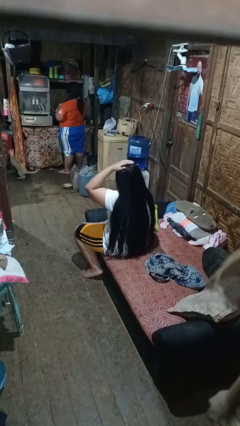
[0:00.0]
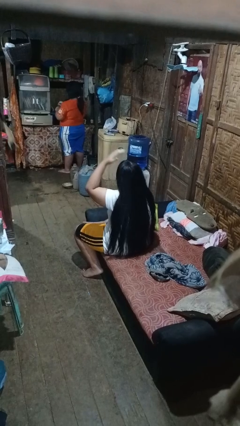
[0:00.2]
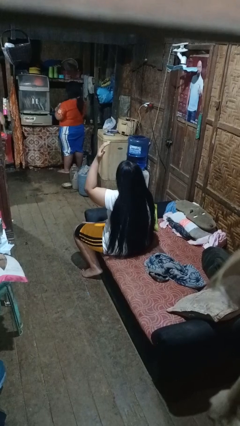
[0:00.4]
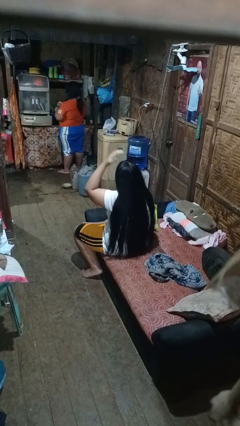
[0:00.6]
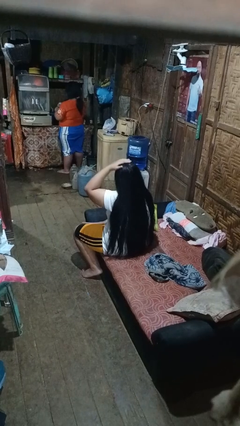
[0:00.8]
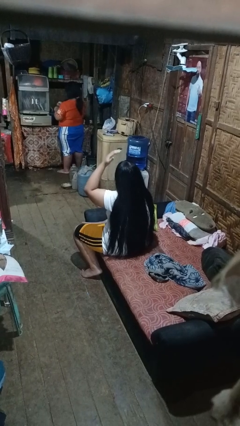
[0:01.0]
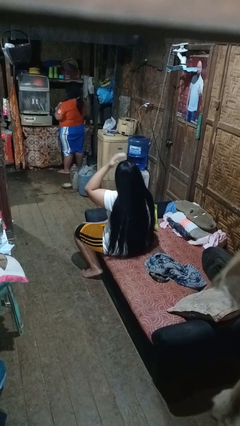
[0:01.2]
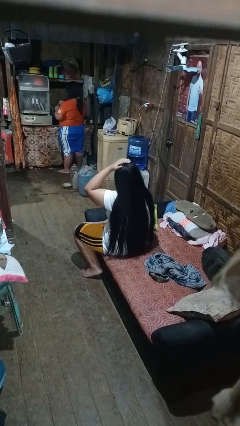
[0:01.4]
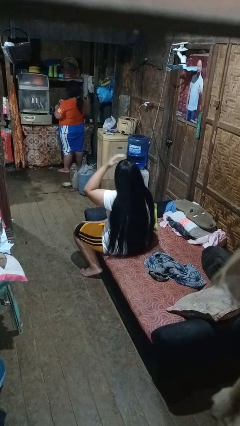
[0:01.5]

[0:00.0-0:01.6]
person pats head

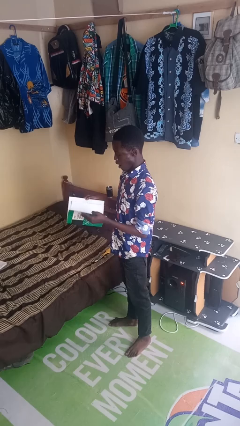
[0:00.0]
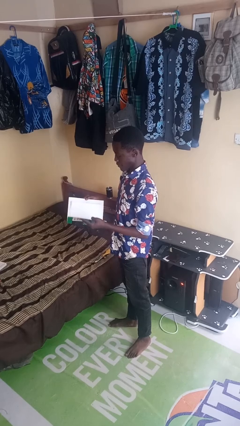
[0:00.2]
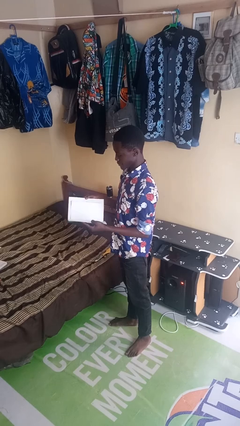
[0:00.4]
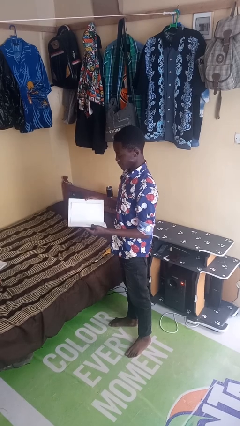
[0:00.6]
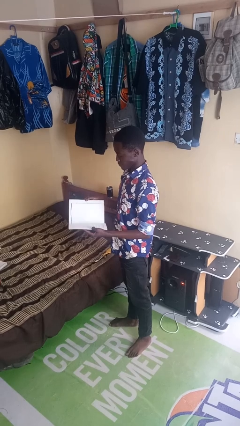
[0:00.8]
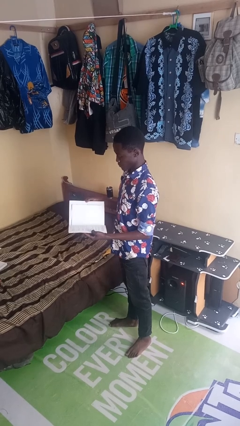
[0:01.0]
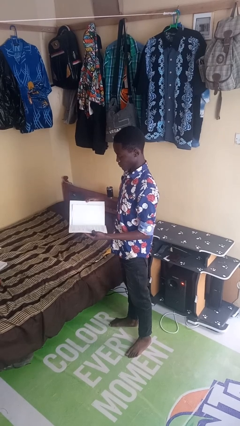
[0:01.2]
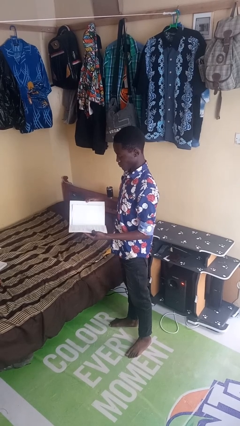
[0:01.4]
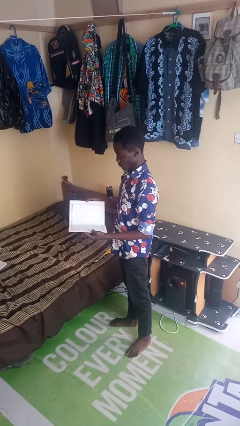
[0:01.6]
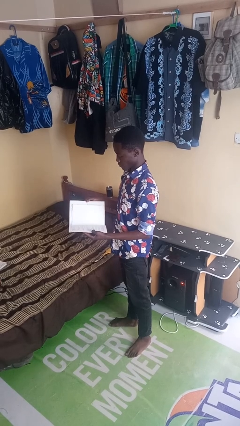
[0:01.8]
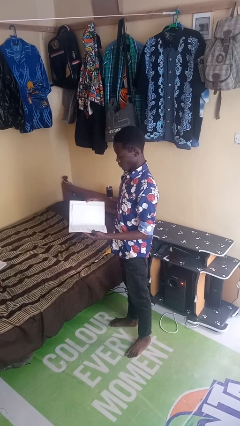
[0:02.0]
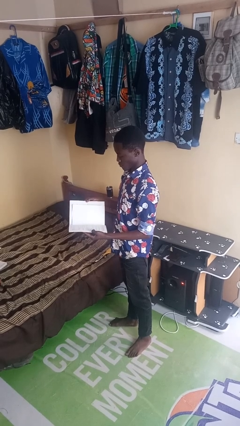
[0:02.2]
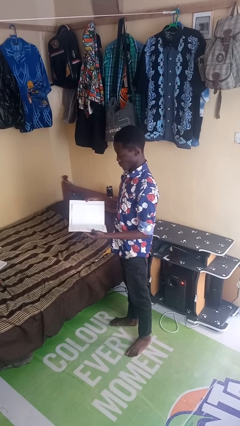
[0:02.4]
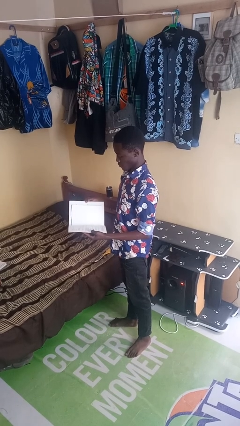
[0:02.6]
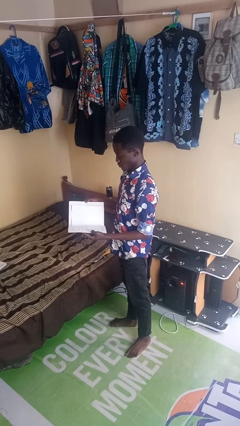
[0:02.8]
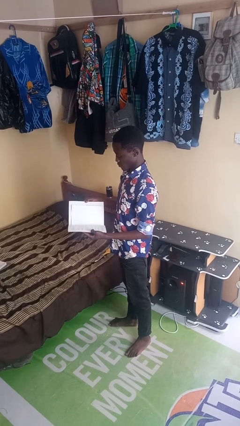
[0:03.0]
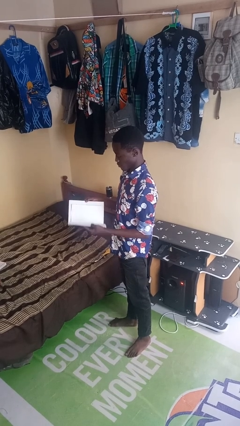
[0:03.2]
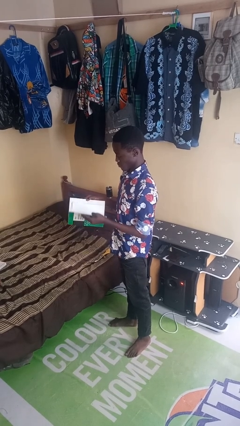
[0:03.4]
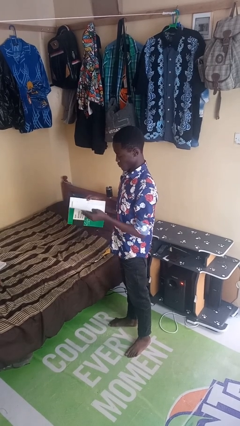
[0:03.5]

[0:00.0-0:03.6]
person reads magazine

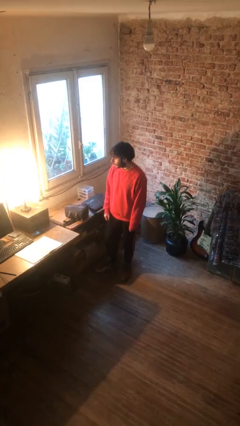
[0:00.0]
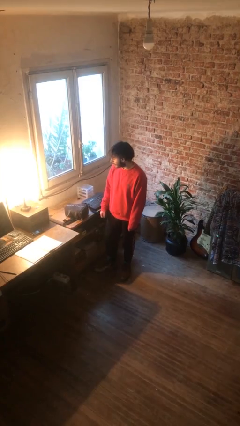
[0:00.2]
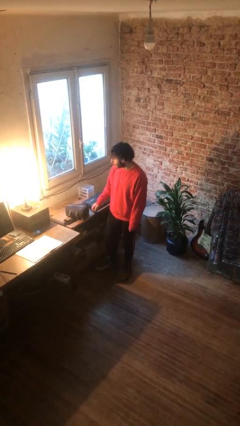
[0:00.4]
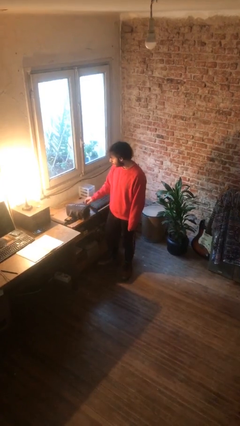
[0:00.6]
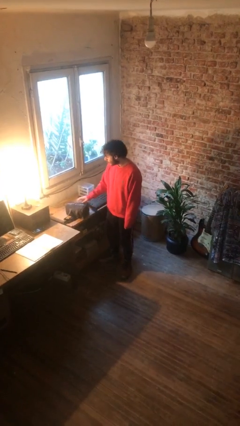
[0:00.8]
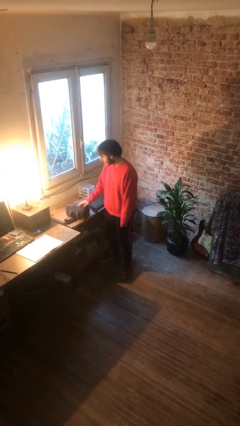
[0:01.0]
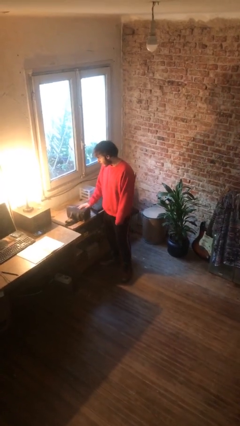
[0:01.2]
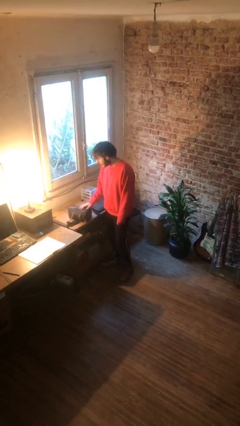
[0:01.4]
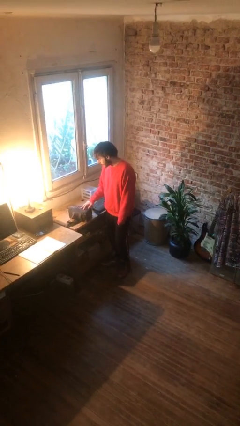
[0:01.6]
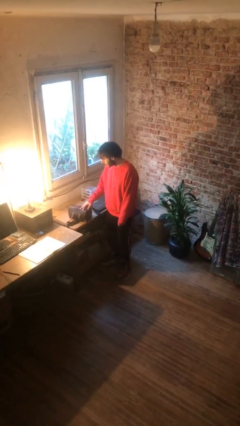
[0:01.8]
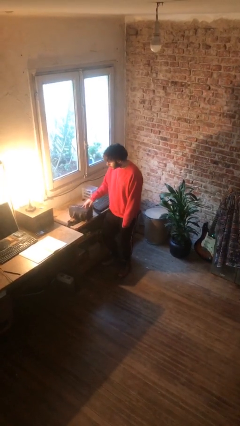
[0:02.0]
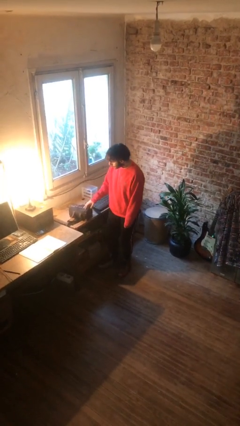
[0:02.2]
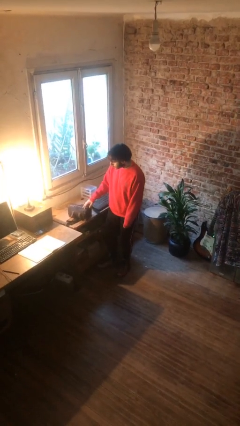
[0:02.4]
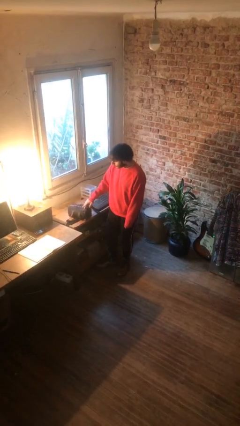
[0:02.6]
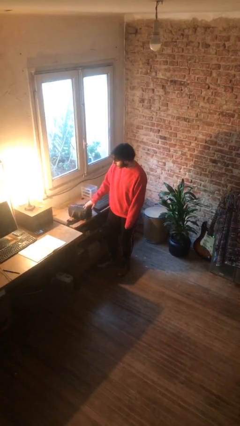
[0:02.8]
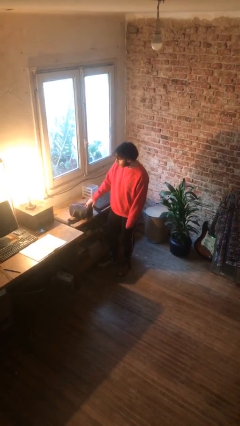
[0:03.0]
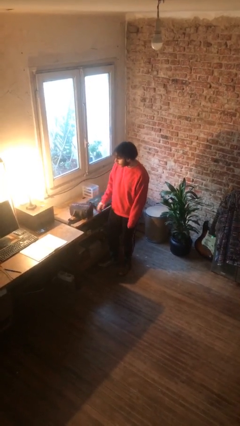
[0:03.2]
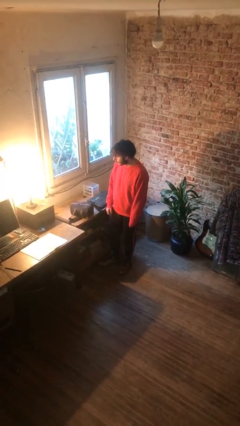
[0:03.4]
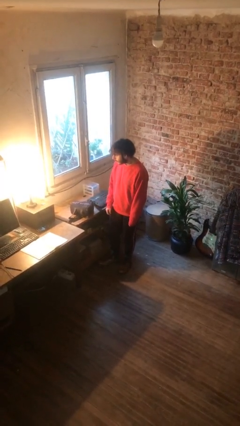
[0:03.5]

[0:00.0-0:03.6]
person taps object with finger

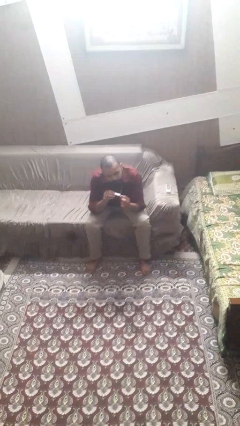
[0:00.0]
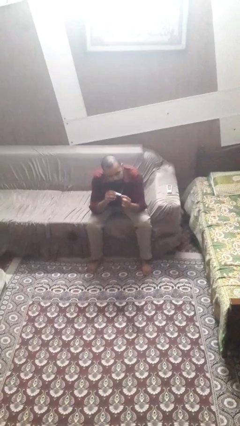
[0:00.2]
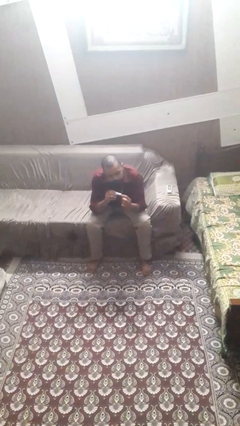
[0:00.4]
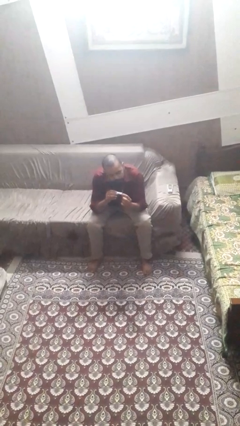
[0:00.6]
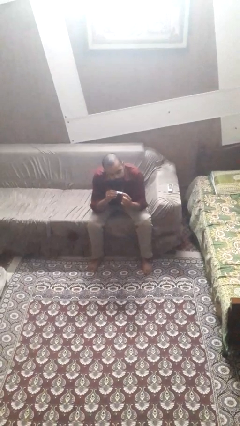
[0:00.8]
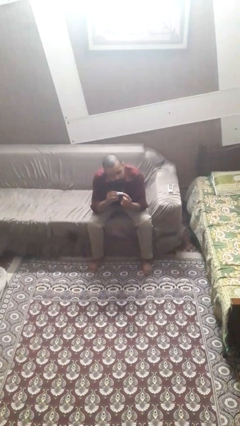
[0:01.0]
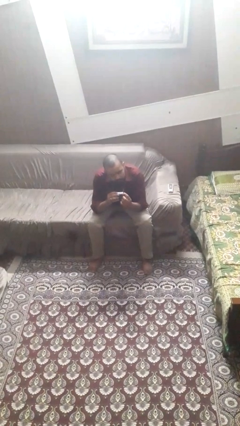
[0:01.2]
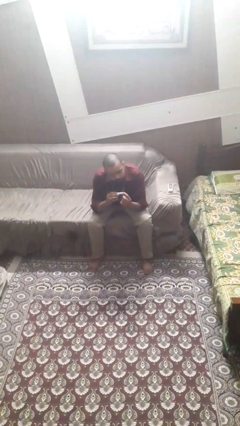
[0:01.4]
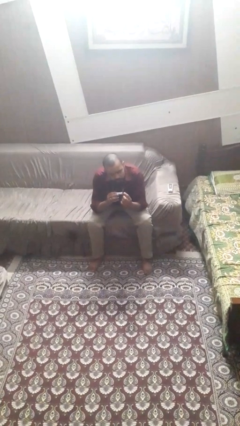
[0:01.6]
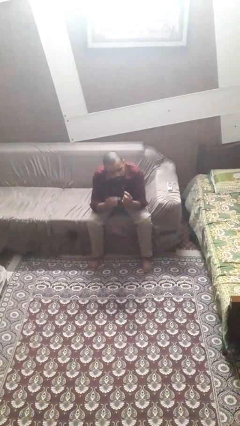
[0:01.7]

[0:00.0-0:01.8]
person clips fingernails

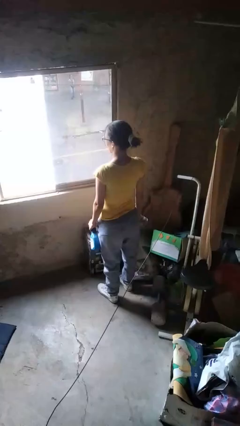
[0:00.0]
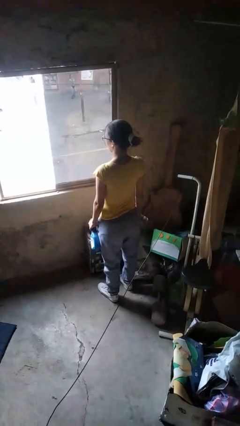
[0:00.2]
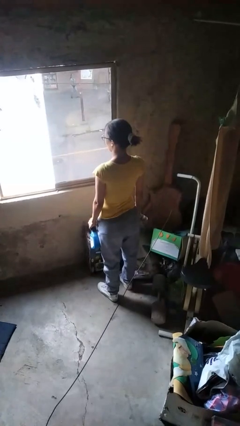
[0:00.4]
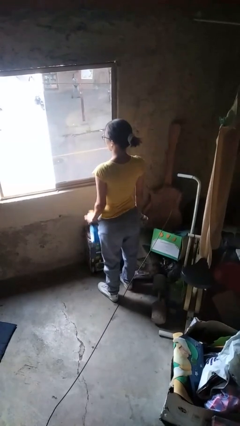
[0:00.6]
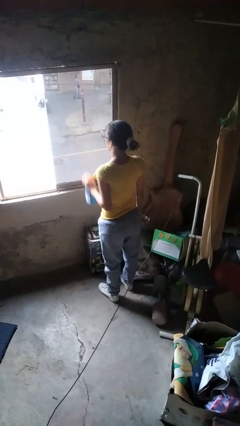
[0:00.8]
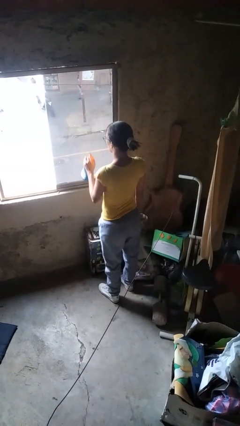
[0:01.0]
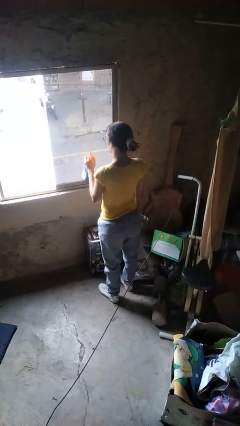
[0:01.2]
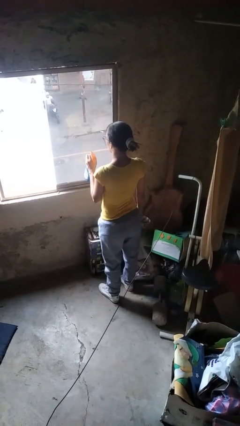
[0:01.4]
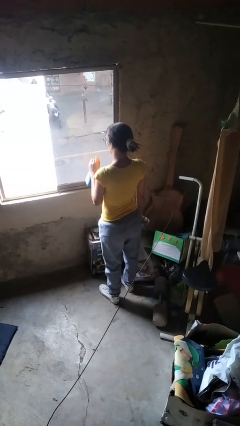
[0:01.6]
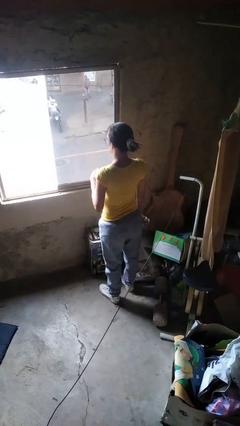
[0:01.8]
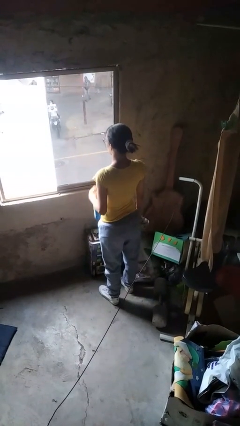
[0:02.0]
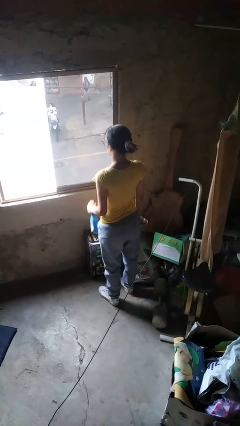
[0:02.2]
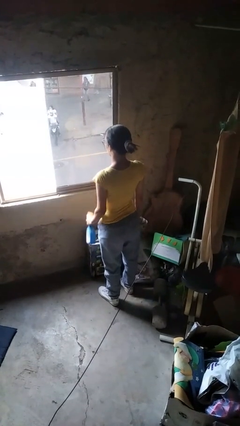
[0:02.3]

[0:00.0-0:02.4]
person sprays from bottle

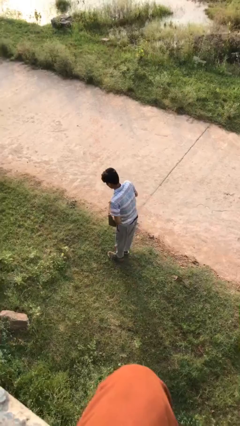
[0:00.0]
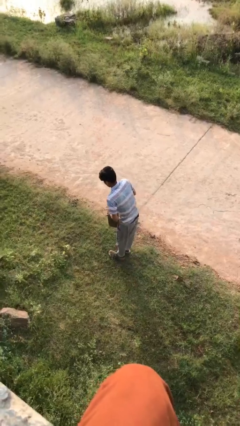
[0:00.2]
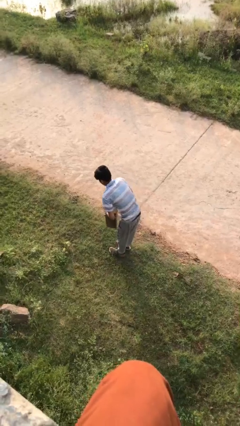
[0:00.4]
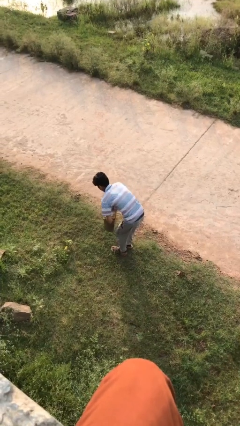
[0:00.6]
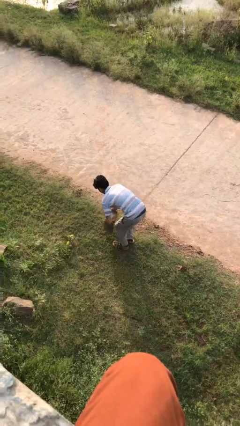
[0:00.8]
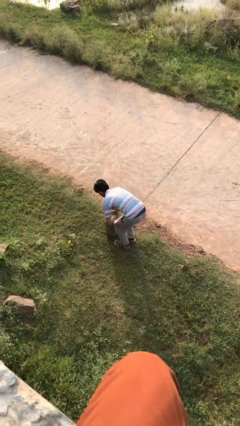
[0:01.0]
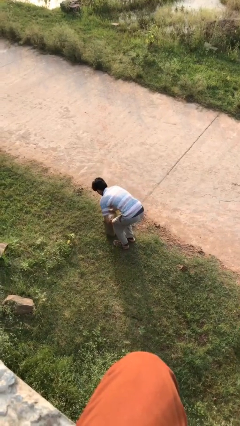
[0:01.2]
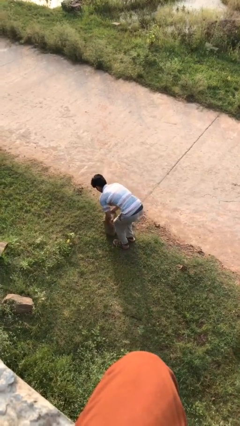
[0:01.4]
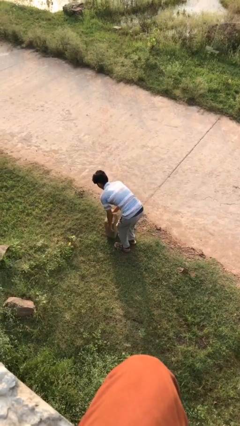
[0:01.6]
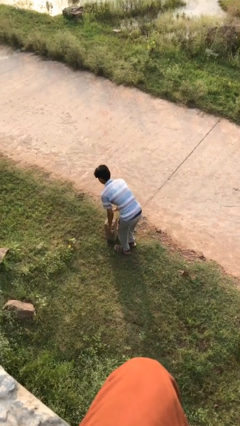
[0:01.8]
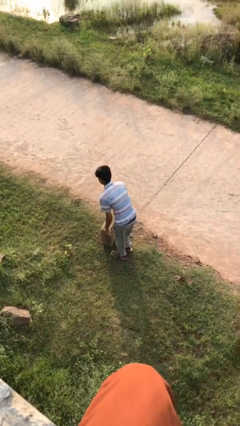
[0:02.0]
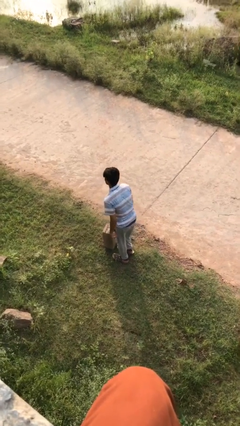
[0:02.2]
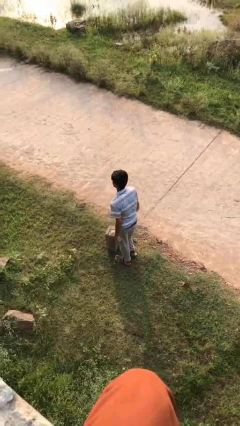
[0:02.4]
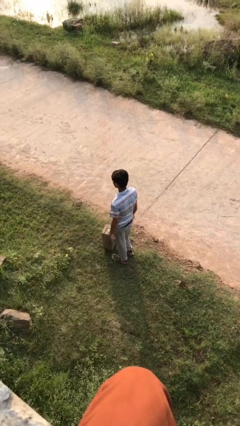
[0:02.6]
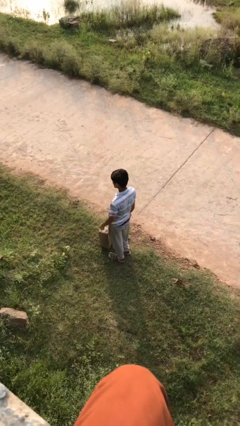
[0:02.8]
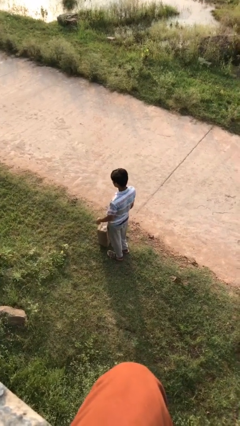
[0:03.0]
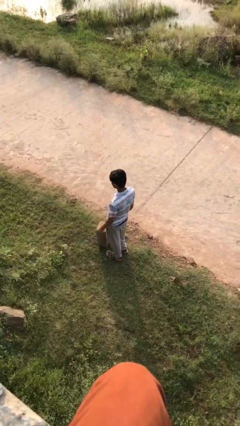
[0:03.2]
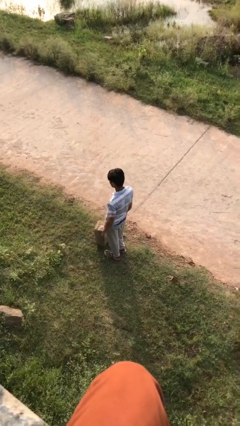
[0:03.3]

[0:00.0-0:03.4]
person puts down object on floor

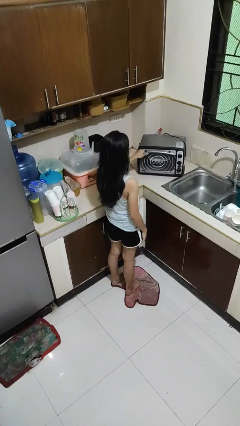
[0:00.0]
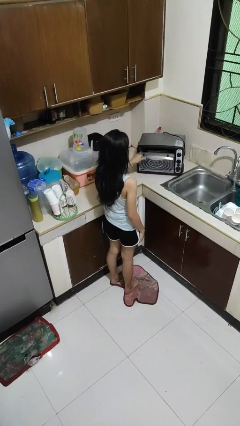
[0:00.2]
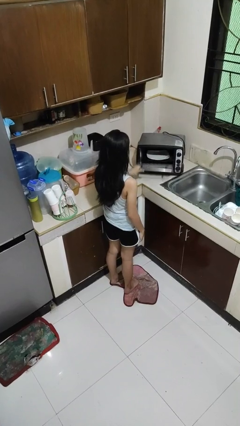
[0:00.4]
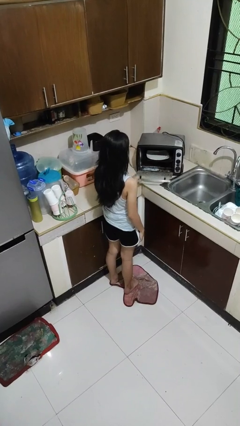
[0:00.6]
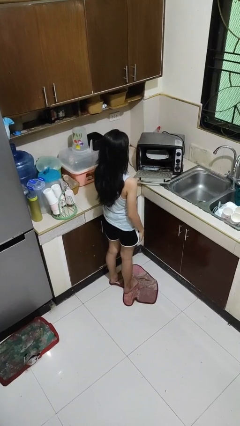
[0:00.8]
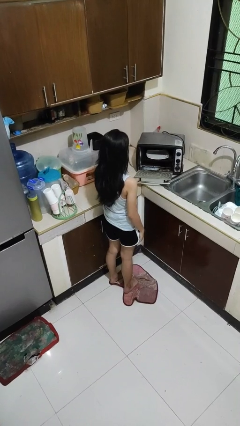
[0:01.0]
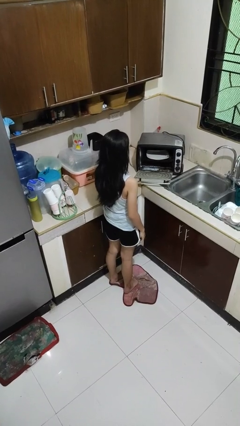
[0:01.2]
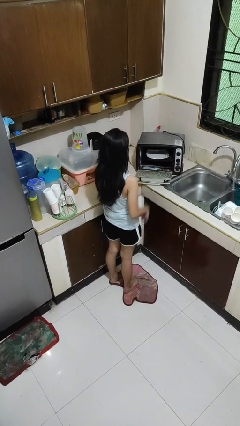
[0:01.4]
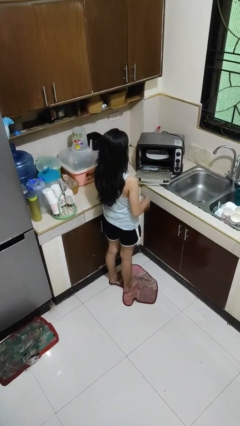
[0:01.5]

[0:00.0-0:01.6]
person opens microwave
